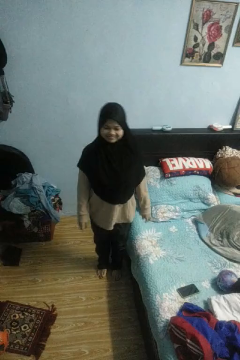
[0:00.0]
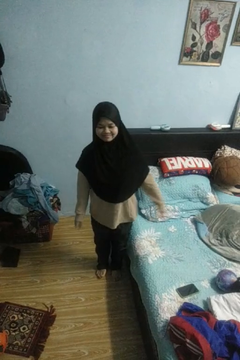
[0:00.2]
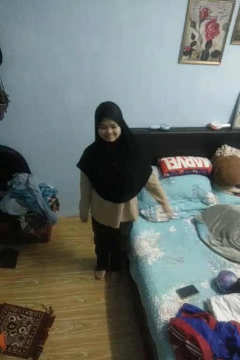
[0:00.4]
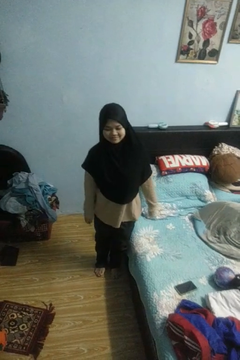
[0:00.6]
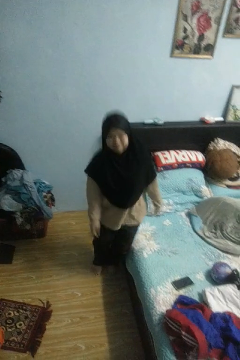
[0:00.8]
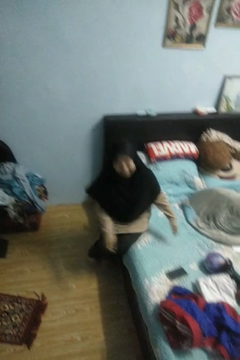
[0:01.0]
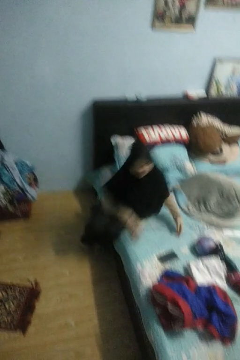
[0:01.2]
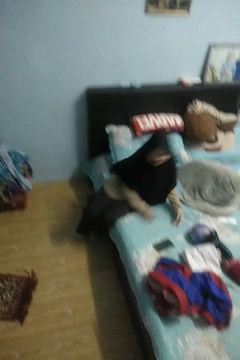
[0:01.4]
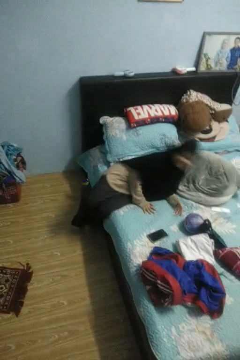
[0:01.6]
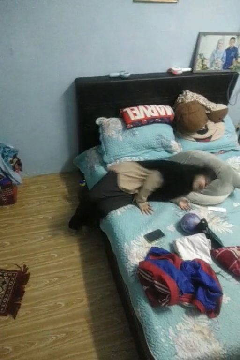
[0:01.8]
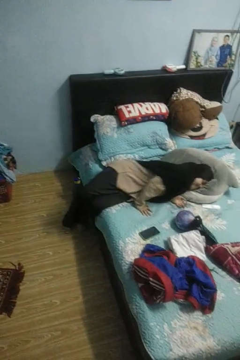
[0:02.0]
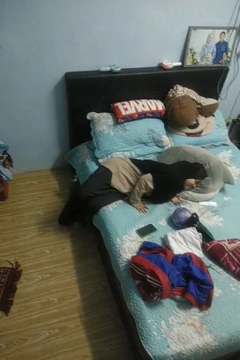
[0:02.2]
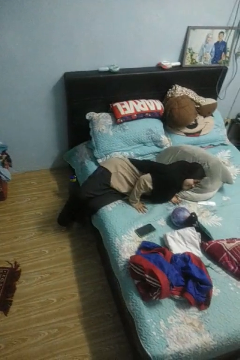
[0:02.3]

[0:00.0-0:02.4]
person lies down on bed

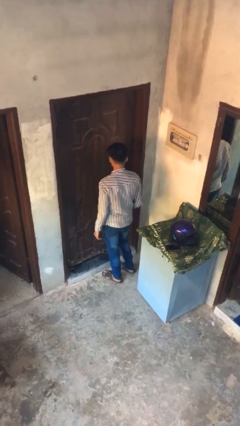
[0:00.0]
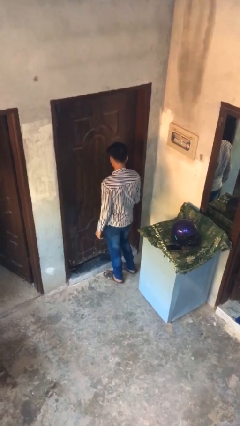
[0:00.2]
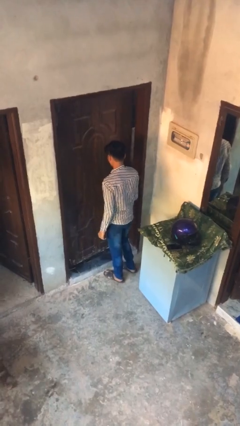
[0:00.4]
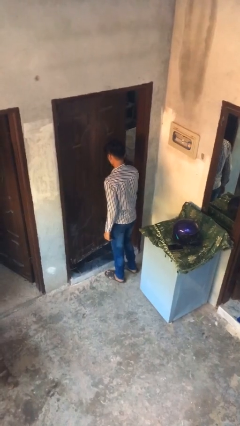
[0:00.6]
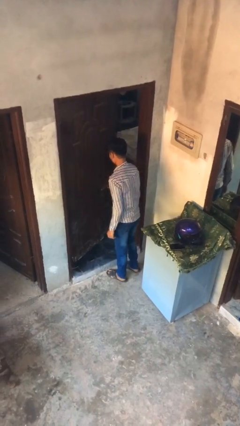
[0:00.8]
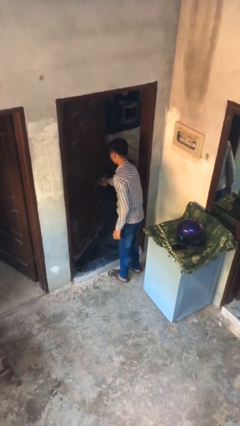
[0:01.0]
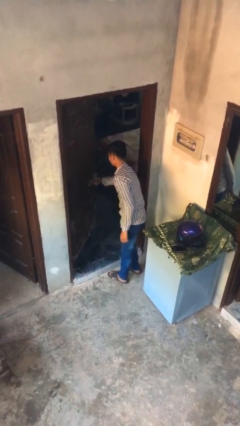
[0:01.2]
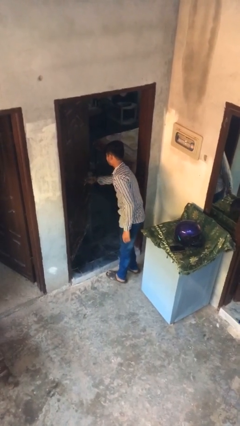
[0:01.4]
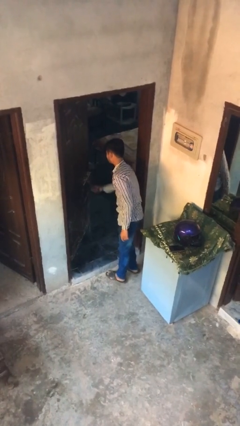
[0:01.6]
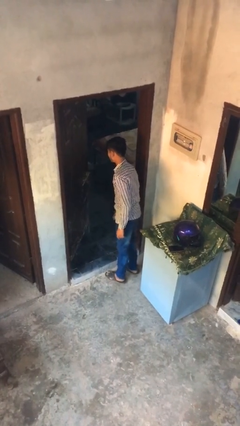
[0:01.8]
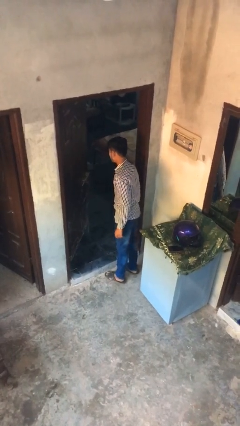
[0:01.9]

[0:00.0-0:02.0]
person opens facility door

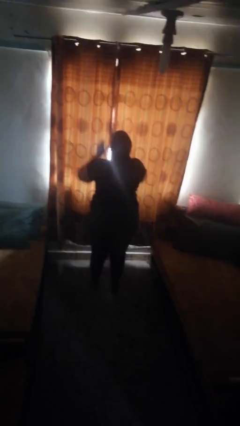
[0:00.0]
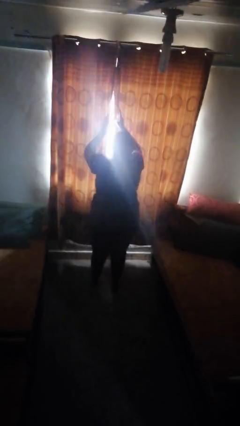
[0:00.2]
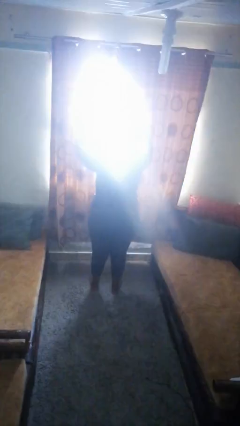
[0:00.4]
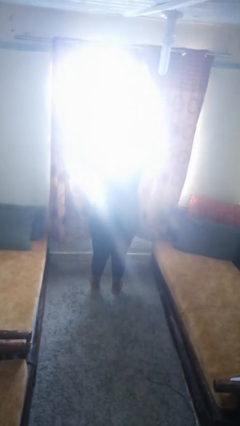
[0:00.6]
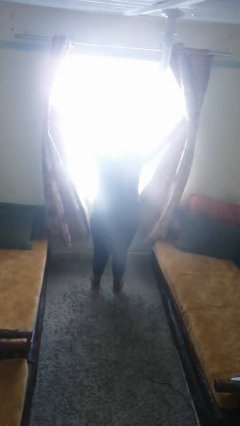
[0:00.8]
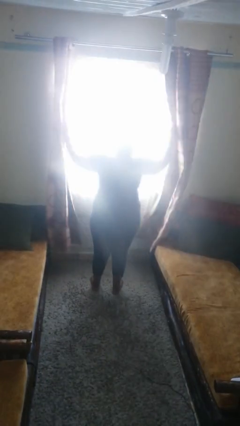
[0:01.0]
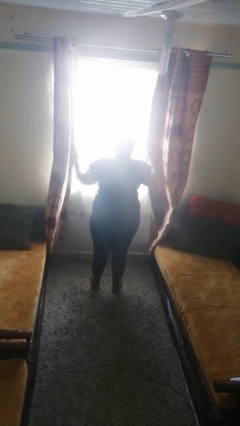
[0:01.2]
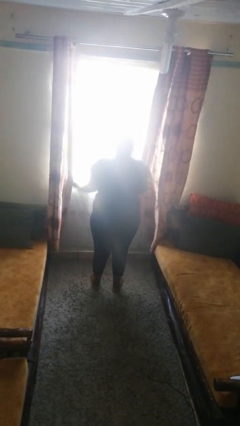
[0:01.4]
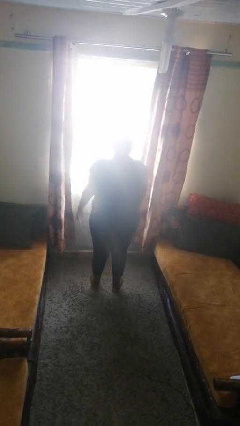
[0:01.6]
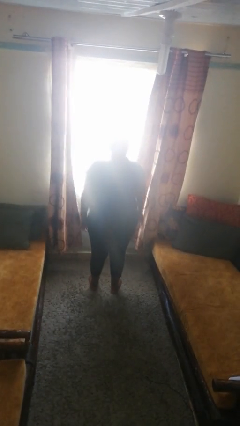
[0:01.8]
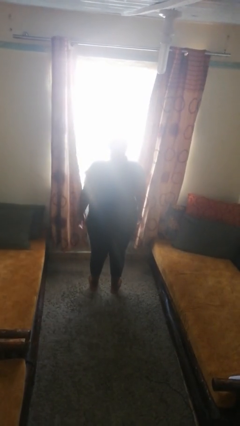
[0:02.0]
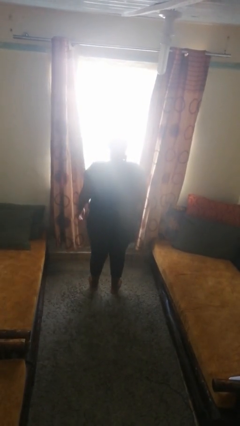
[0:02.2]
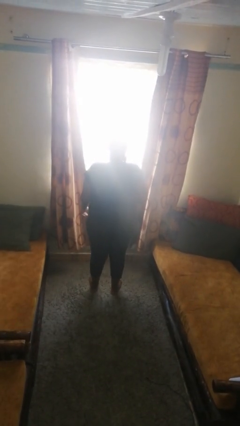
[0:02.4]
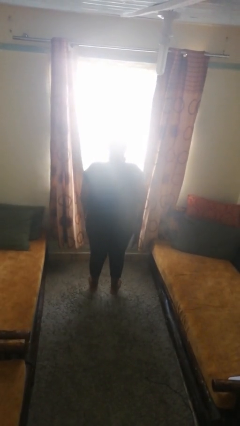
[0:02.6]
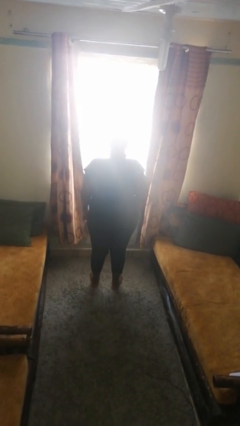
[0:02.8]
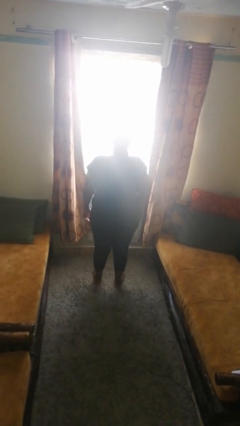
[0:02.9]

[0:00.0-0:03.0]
person opens curtains

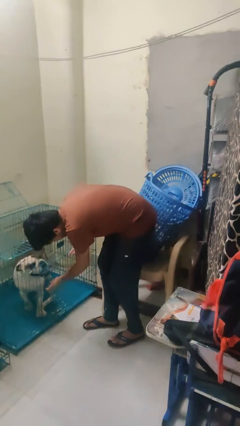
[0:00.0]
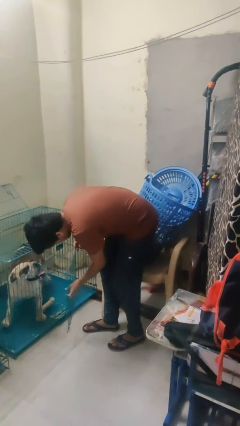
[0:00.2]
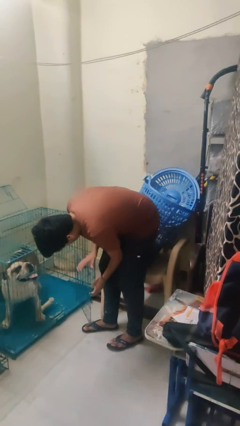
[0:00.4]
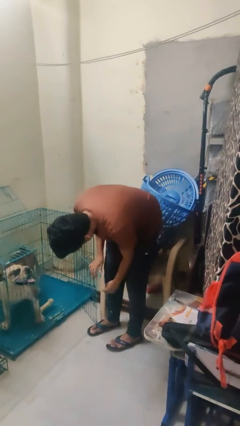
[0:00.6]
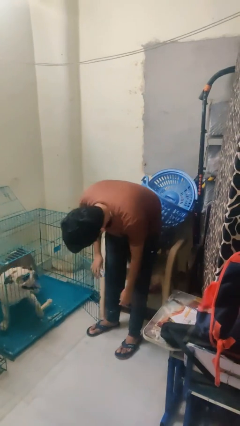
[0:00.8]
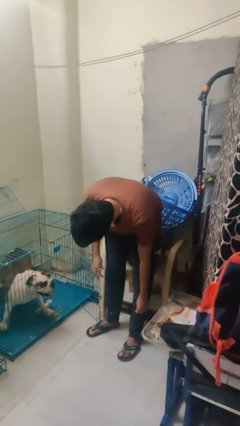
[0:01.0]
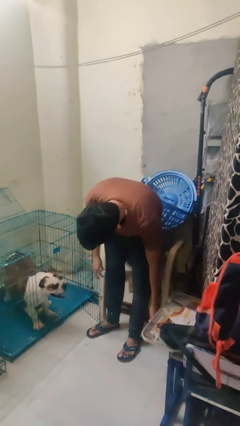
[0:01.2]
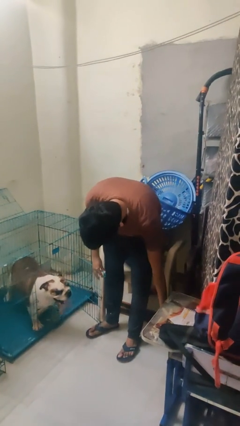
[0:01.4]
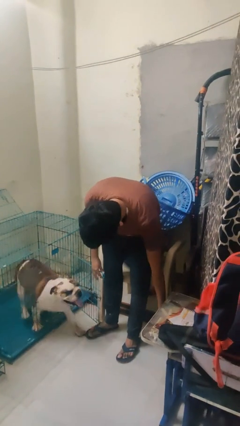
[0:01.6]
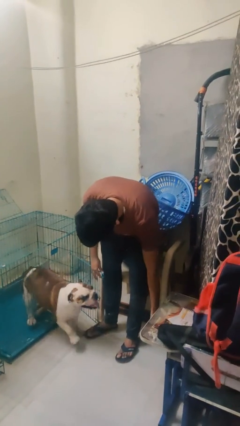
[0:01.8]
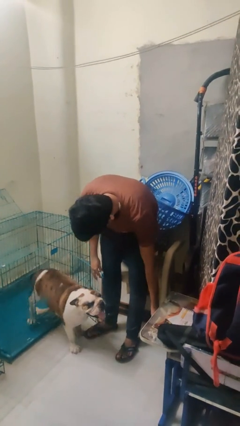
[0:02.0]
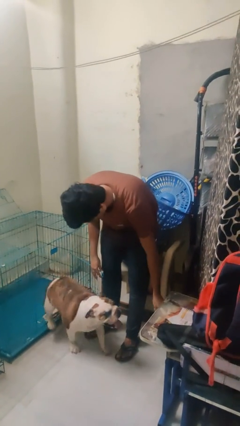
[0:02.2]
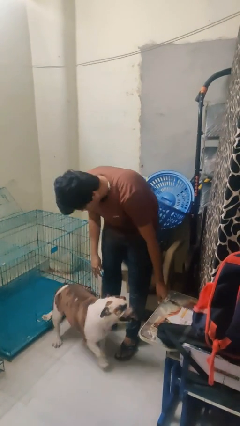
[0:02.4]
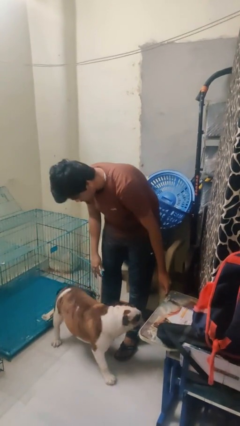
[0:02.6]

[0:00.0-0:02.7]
person uncrates dog

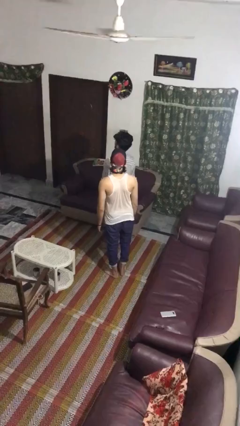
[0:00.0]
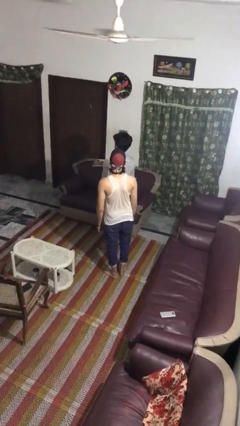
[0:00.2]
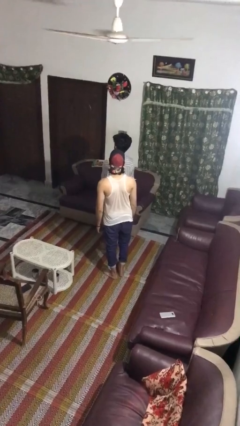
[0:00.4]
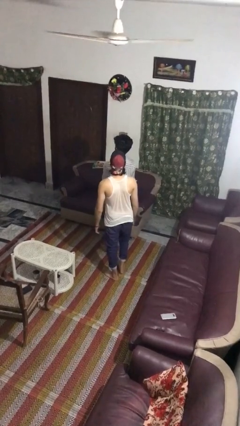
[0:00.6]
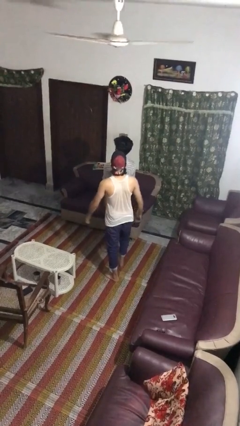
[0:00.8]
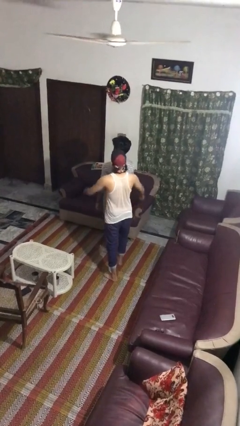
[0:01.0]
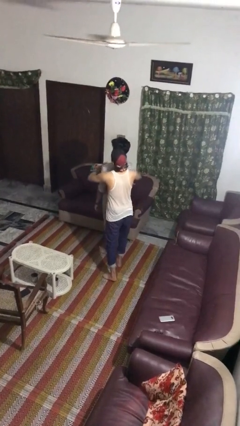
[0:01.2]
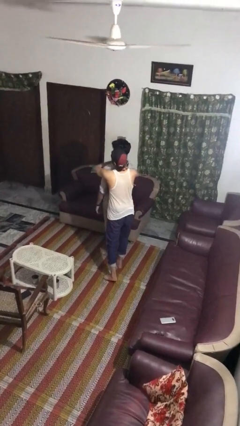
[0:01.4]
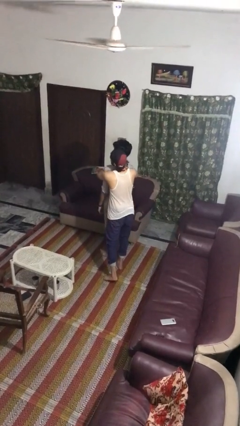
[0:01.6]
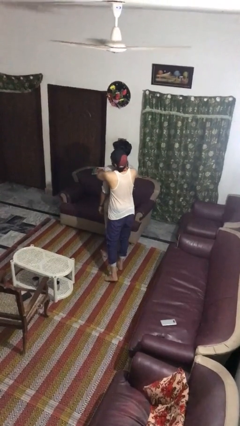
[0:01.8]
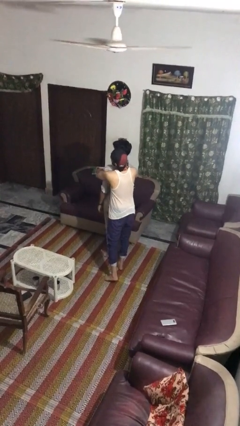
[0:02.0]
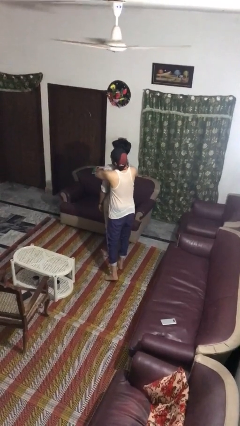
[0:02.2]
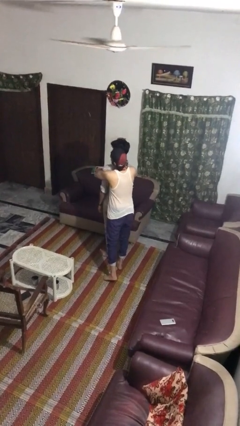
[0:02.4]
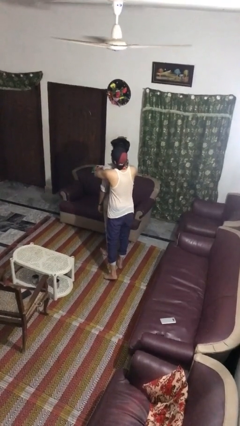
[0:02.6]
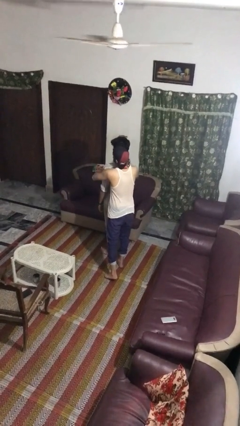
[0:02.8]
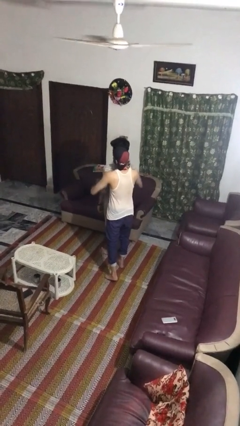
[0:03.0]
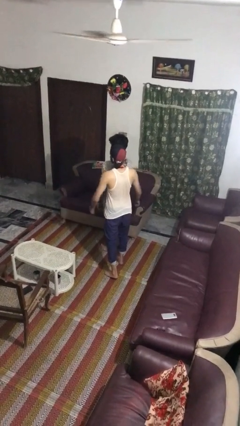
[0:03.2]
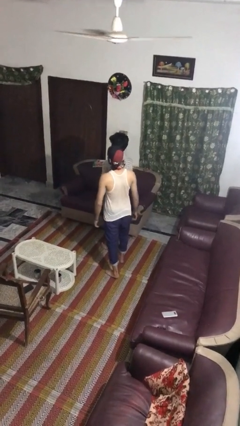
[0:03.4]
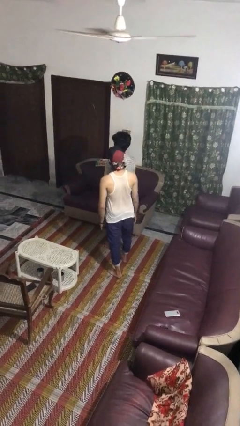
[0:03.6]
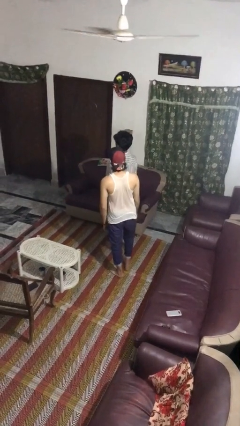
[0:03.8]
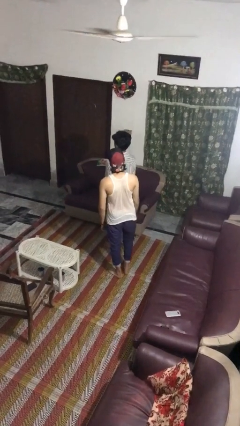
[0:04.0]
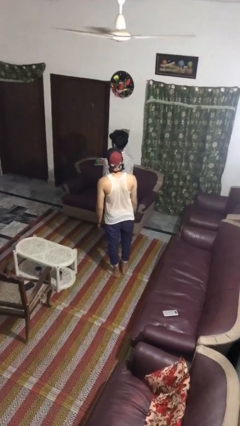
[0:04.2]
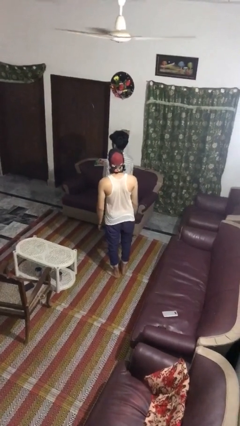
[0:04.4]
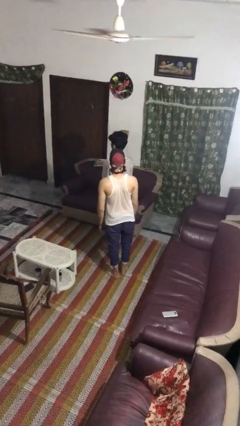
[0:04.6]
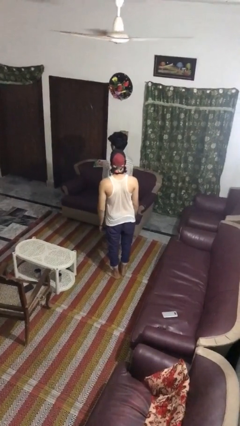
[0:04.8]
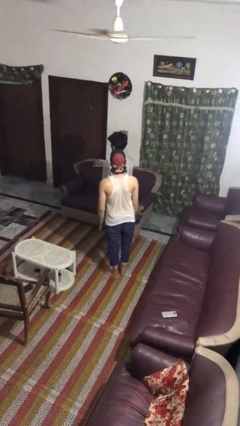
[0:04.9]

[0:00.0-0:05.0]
person hugs person from behind

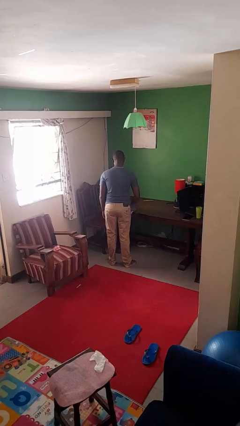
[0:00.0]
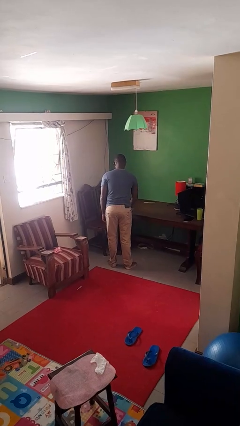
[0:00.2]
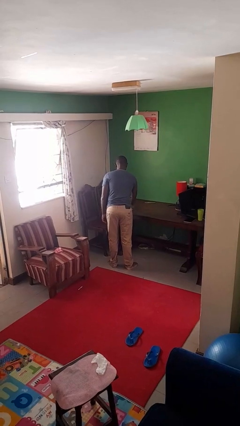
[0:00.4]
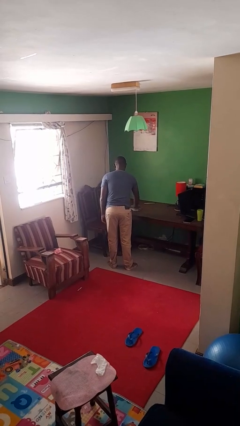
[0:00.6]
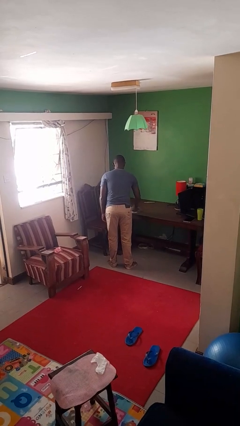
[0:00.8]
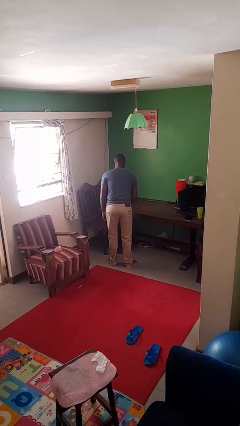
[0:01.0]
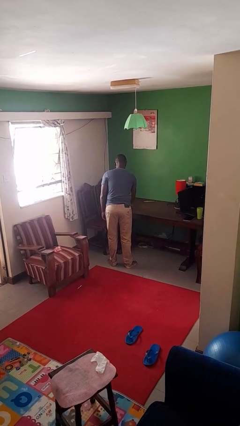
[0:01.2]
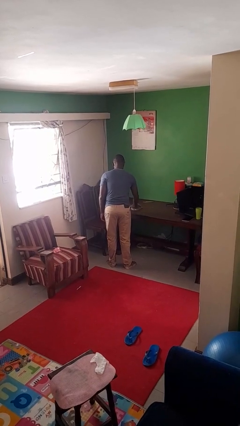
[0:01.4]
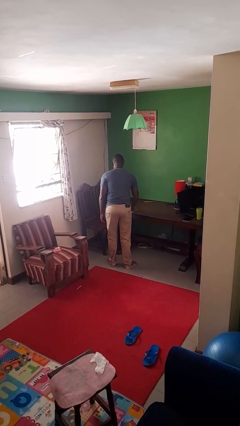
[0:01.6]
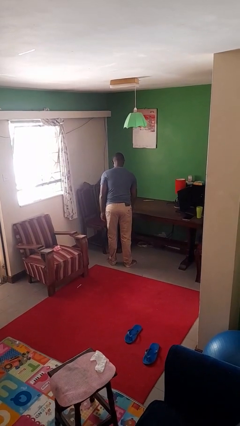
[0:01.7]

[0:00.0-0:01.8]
person cleans table with rag

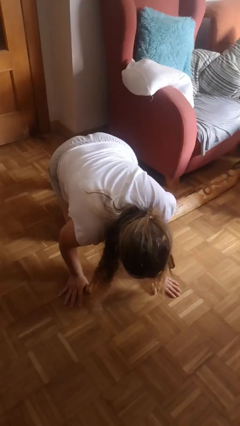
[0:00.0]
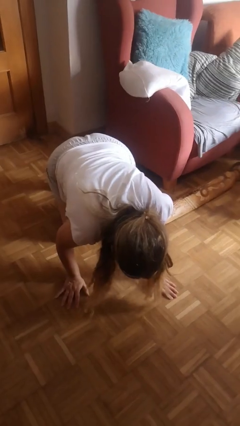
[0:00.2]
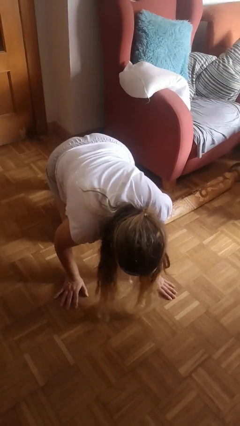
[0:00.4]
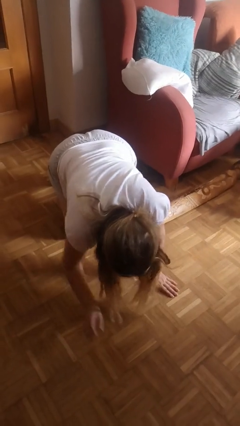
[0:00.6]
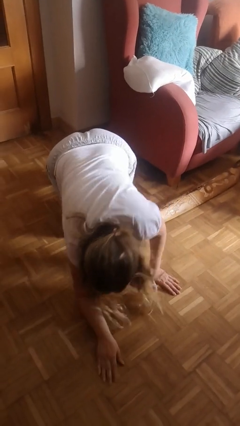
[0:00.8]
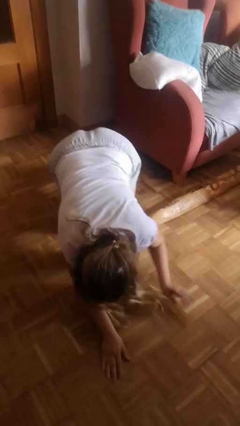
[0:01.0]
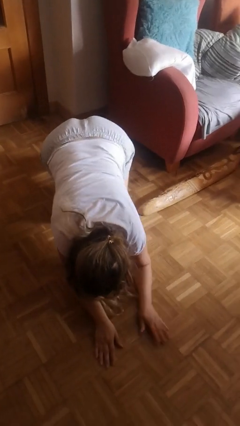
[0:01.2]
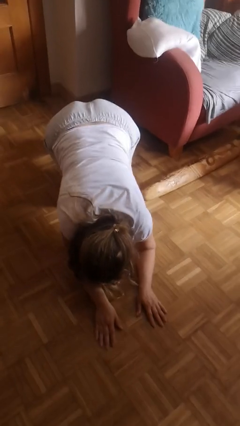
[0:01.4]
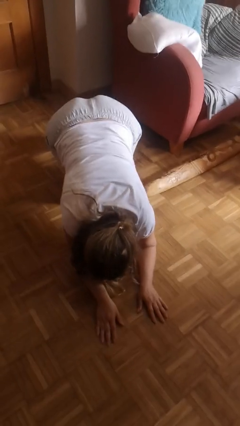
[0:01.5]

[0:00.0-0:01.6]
person lies down on floor
